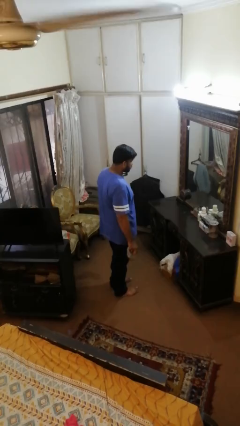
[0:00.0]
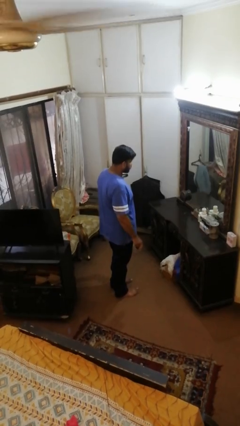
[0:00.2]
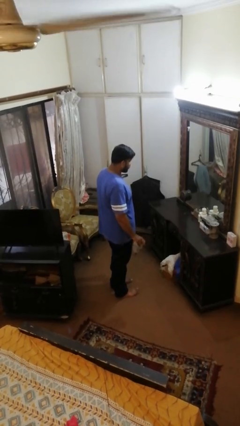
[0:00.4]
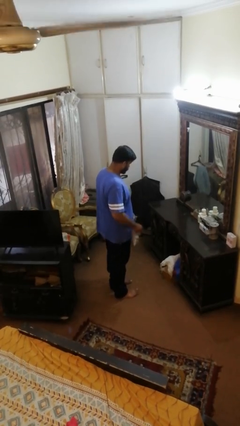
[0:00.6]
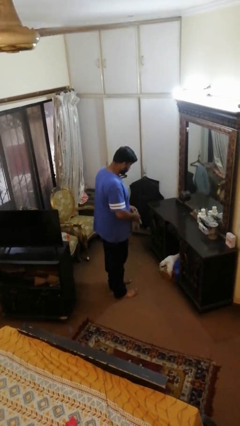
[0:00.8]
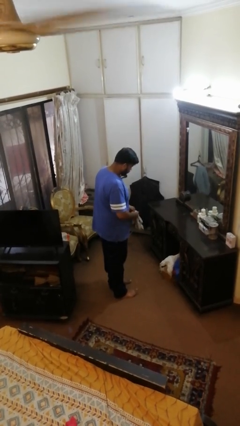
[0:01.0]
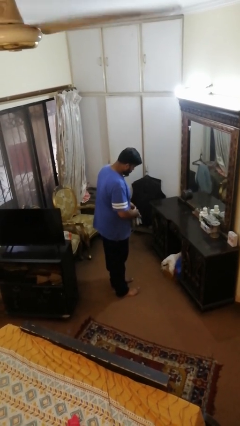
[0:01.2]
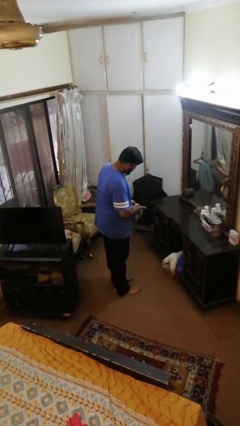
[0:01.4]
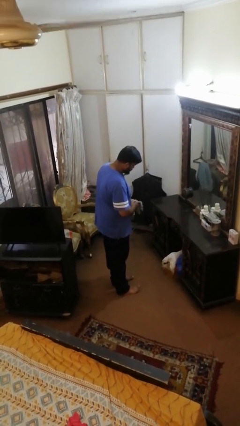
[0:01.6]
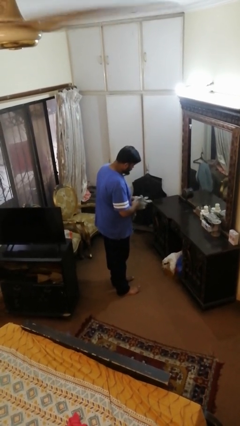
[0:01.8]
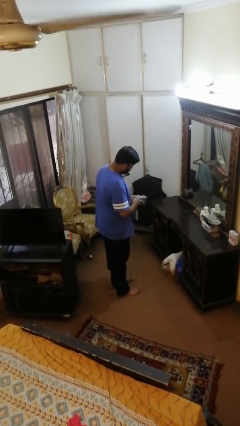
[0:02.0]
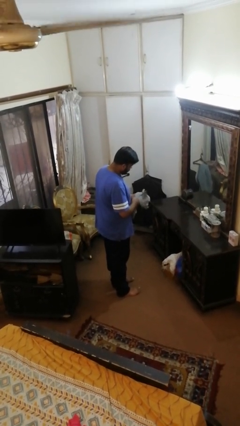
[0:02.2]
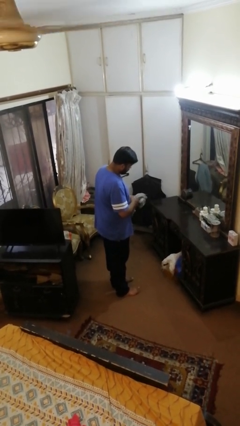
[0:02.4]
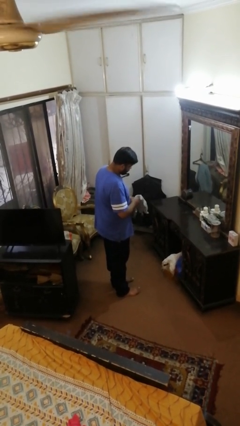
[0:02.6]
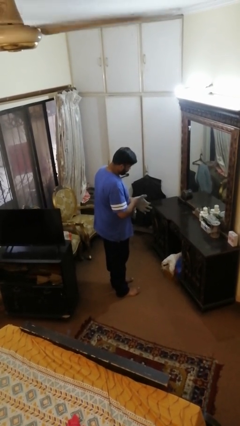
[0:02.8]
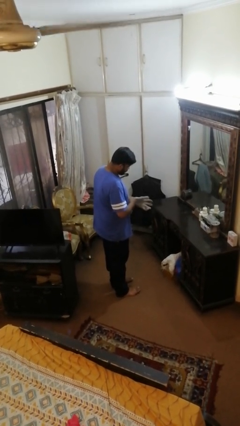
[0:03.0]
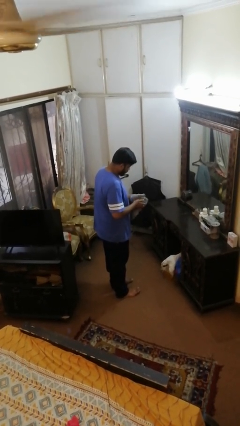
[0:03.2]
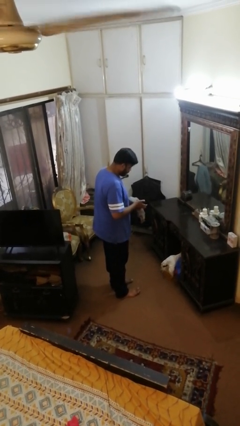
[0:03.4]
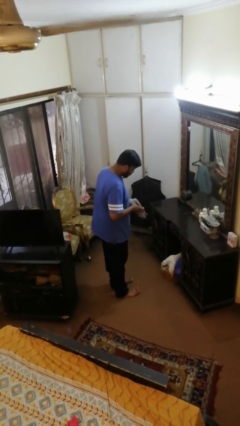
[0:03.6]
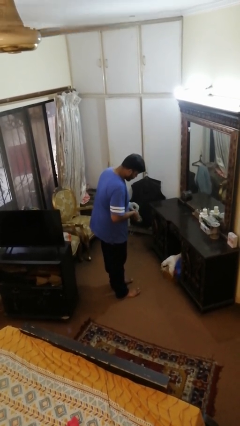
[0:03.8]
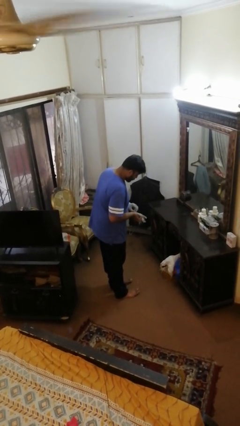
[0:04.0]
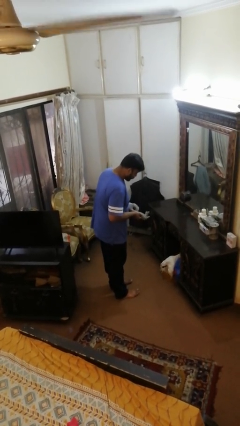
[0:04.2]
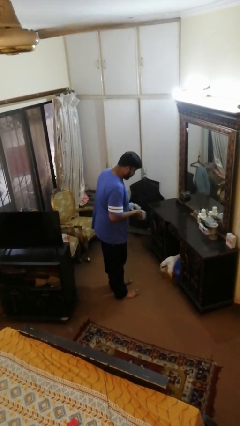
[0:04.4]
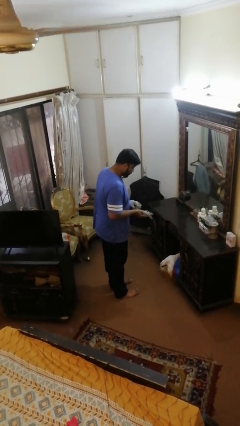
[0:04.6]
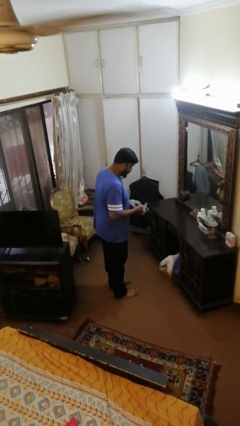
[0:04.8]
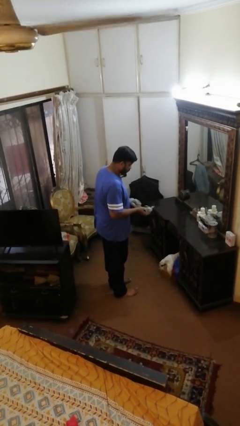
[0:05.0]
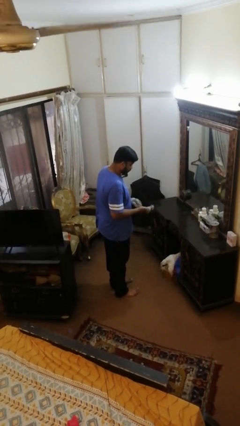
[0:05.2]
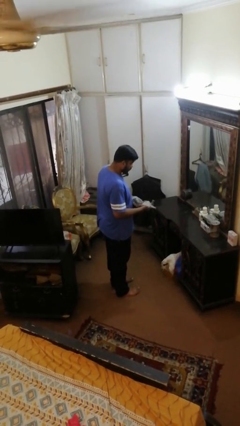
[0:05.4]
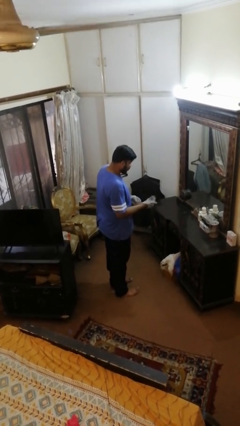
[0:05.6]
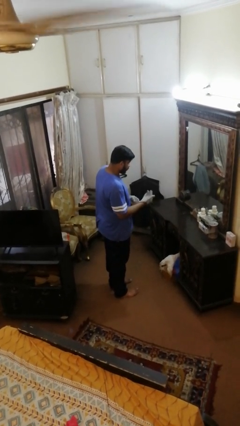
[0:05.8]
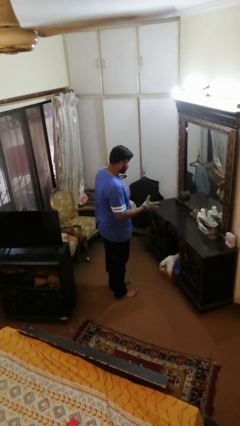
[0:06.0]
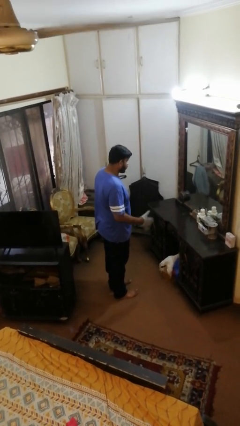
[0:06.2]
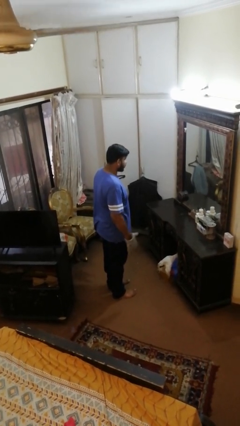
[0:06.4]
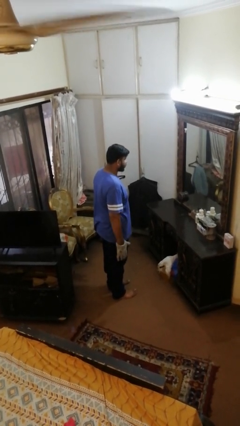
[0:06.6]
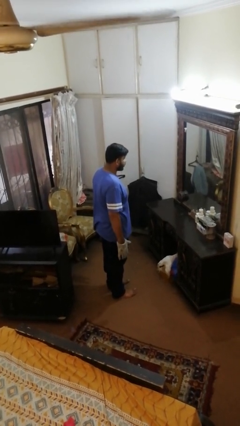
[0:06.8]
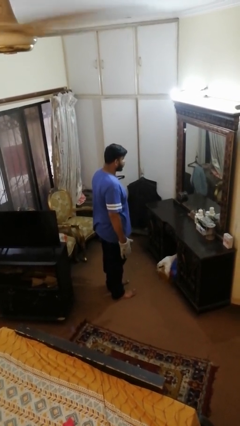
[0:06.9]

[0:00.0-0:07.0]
person puts on gloves

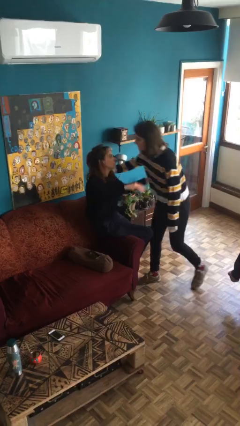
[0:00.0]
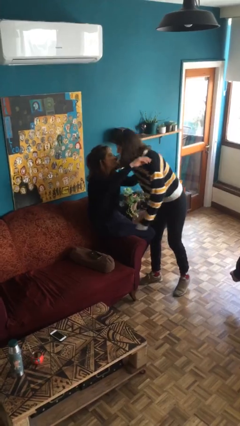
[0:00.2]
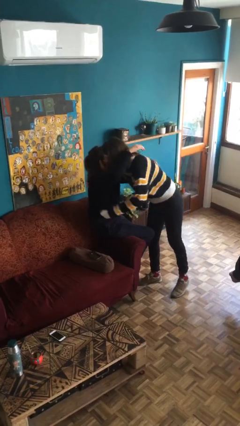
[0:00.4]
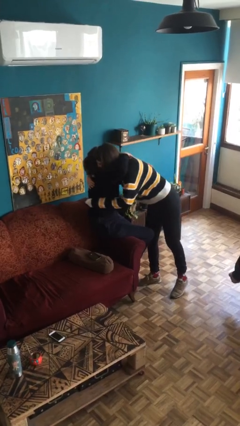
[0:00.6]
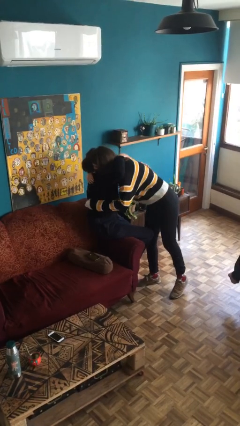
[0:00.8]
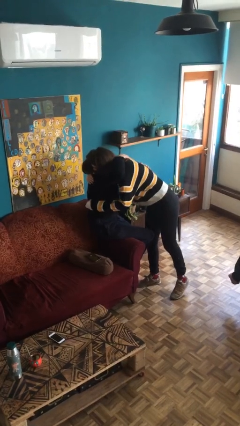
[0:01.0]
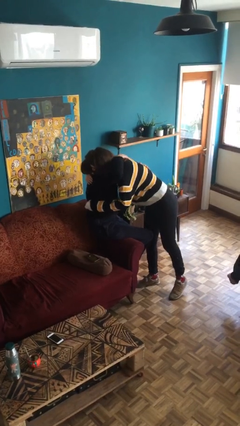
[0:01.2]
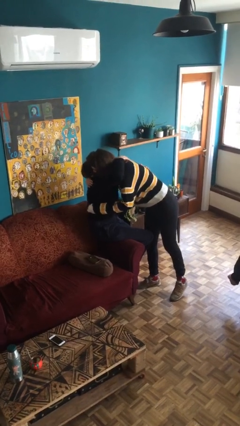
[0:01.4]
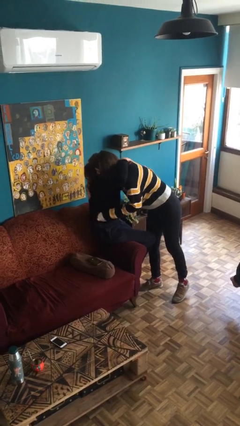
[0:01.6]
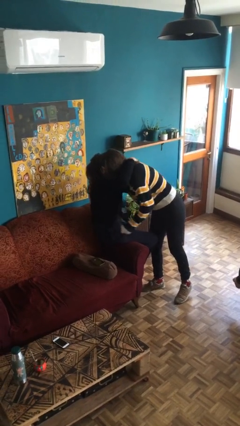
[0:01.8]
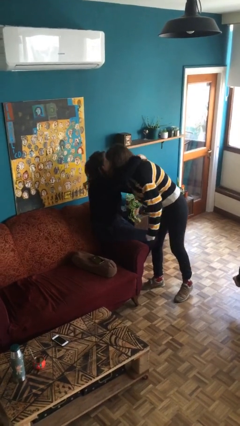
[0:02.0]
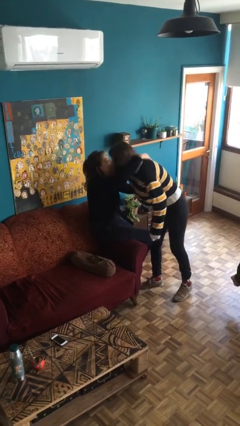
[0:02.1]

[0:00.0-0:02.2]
person embraces person

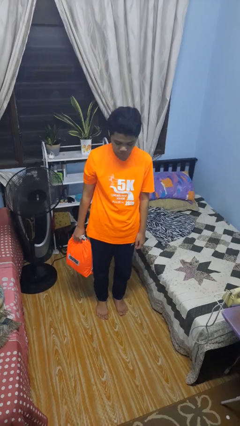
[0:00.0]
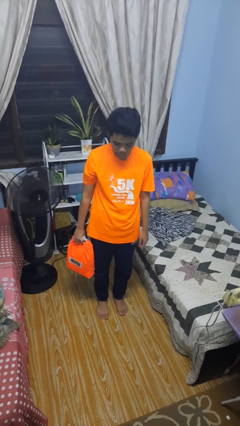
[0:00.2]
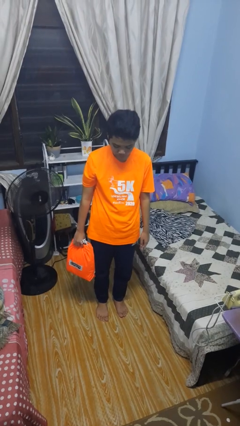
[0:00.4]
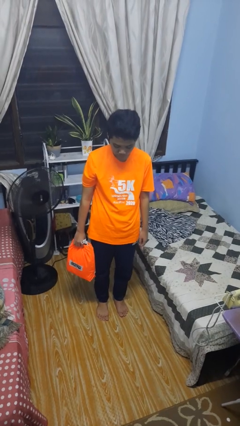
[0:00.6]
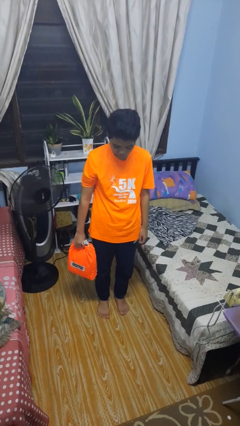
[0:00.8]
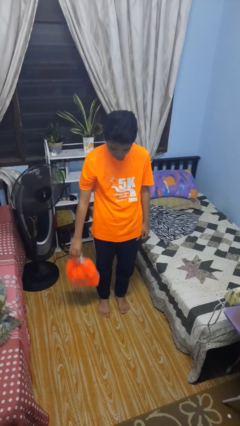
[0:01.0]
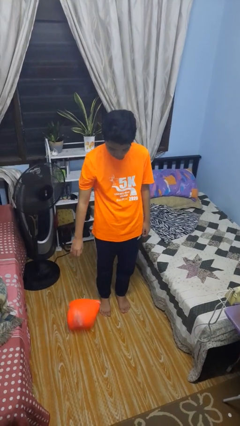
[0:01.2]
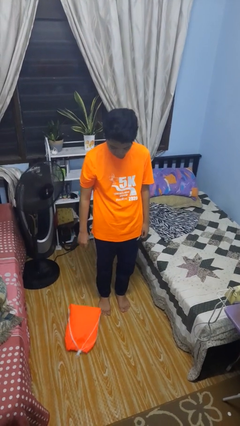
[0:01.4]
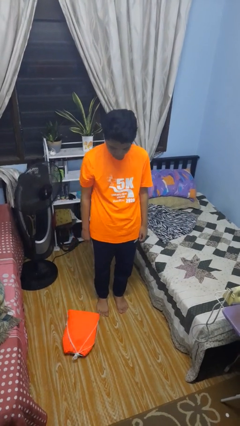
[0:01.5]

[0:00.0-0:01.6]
person drops object

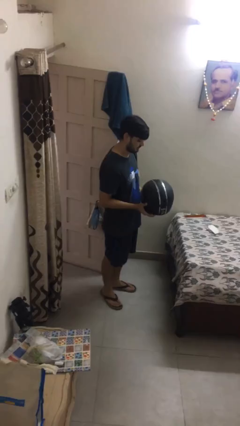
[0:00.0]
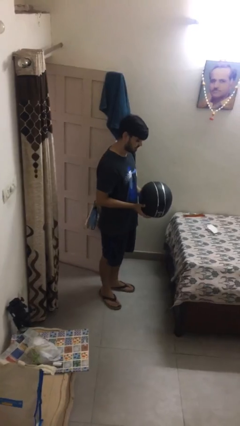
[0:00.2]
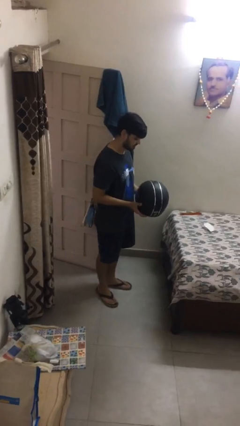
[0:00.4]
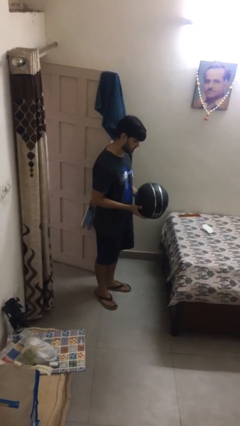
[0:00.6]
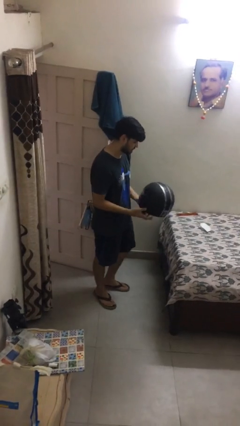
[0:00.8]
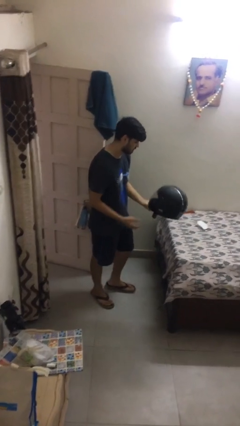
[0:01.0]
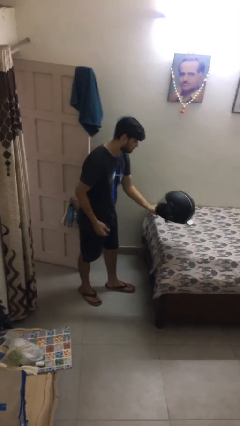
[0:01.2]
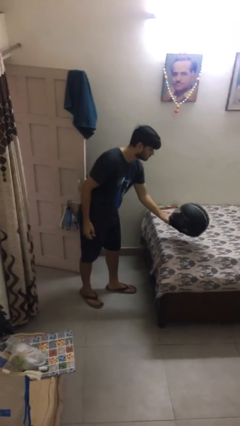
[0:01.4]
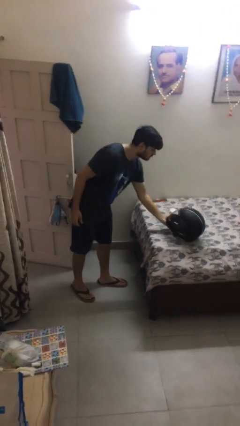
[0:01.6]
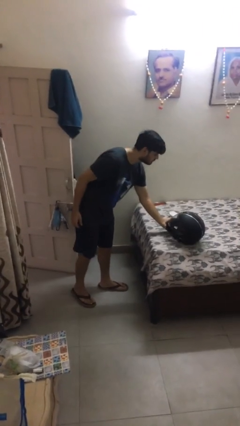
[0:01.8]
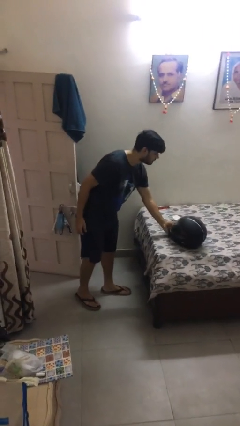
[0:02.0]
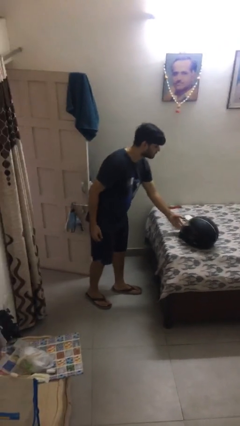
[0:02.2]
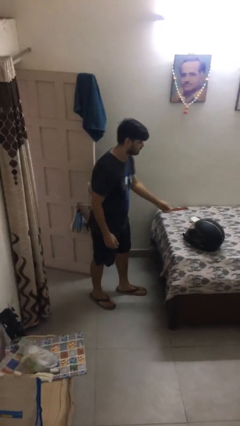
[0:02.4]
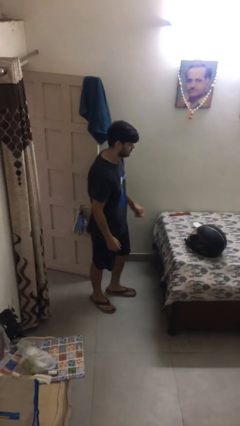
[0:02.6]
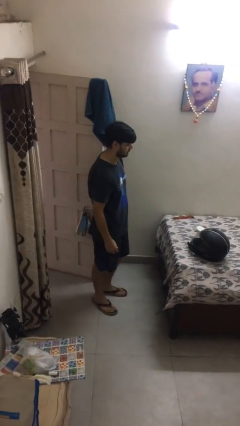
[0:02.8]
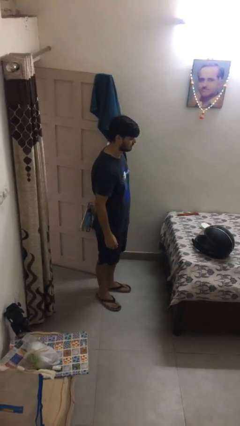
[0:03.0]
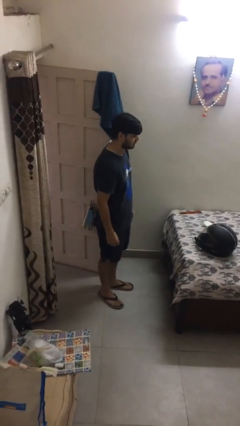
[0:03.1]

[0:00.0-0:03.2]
person puts down object on bed

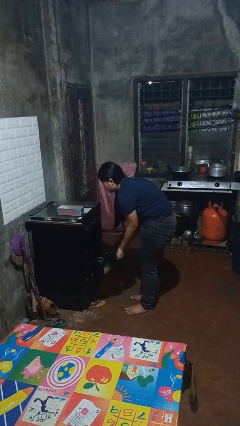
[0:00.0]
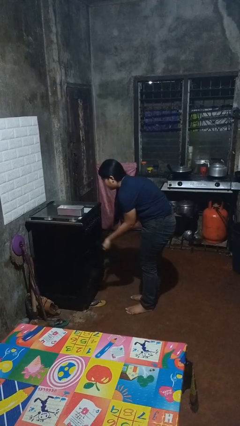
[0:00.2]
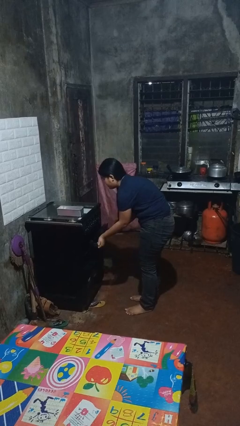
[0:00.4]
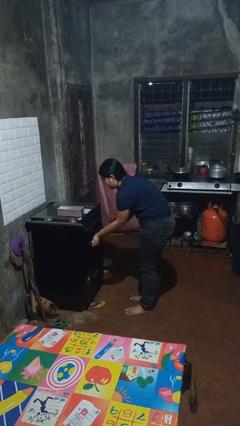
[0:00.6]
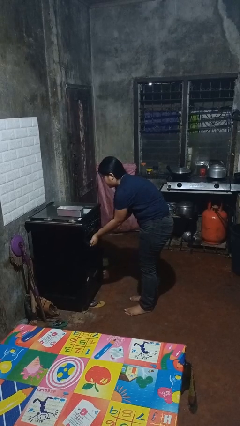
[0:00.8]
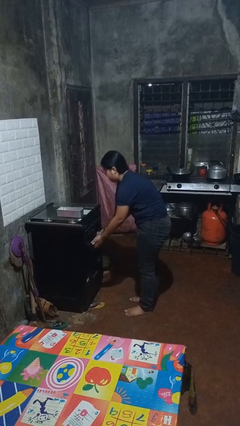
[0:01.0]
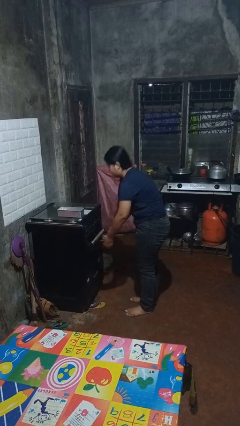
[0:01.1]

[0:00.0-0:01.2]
person closes oven door

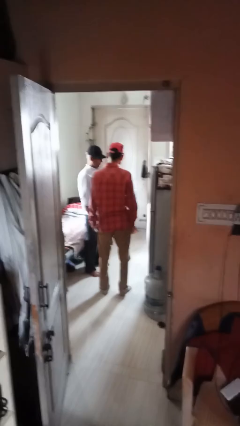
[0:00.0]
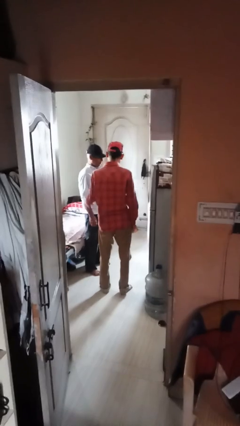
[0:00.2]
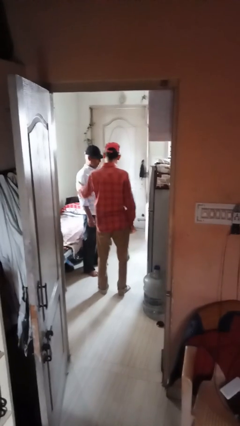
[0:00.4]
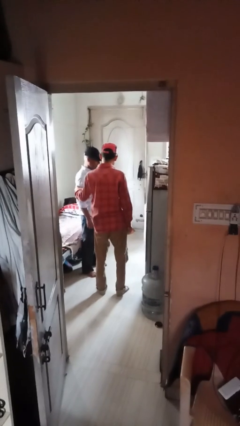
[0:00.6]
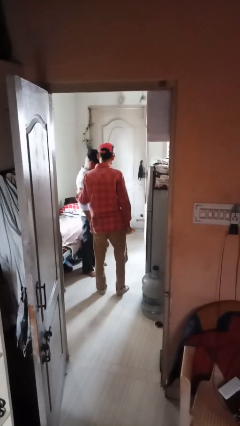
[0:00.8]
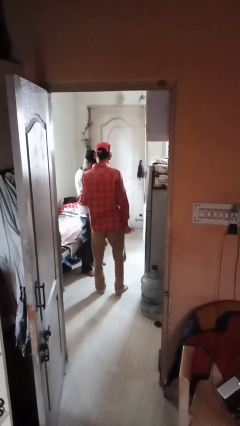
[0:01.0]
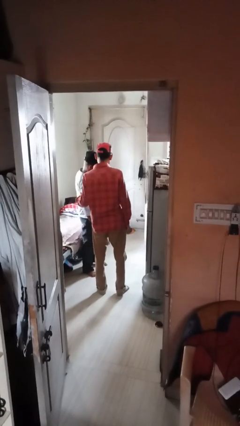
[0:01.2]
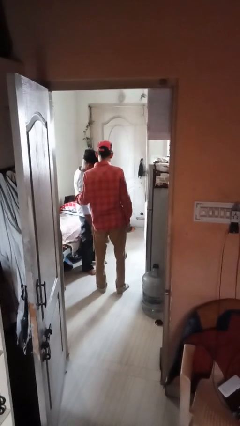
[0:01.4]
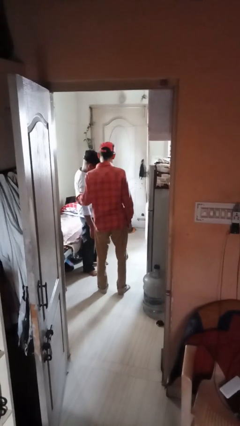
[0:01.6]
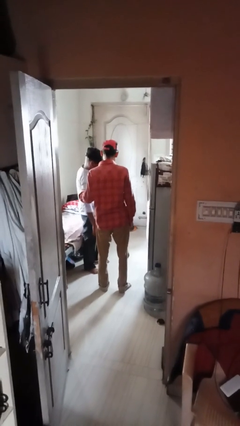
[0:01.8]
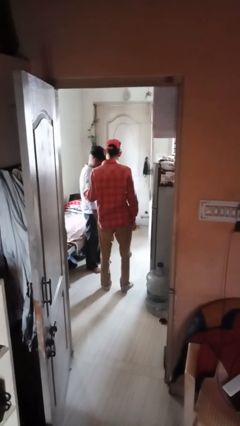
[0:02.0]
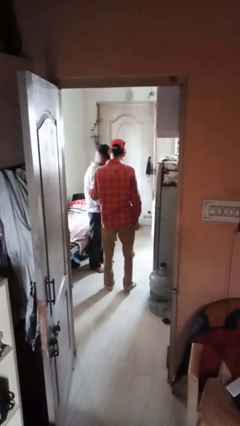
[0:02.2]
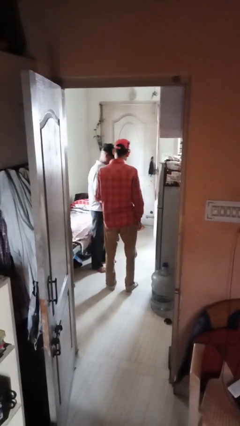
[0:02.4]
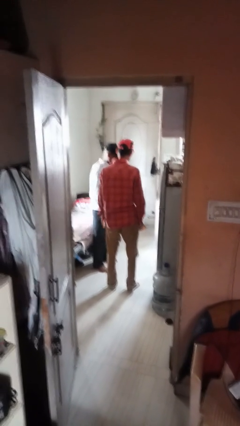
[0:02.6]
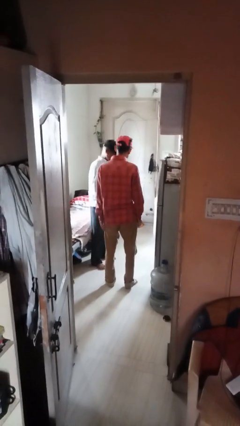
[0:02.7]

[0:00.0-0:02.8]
person grabs person by bicep
